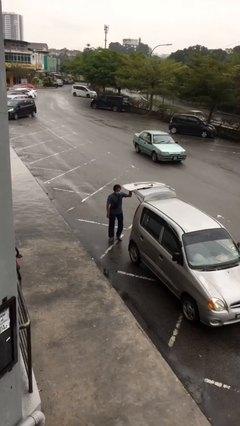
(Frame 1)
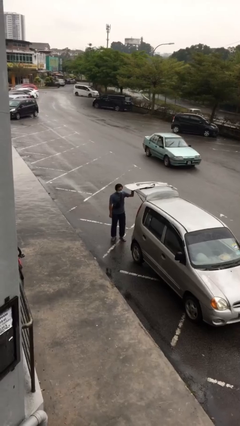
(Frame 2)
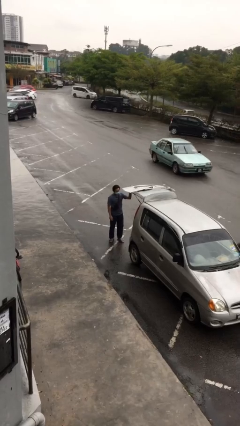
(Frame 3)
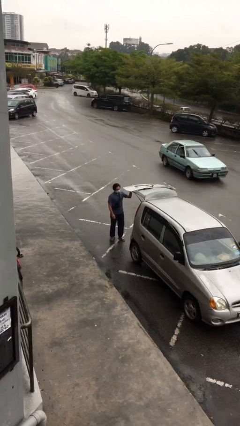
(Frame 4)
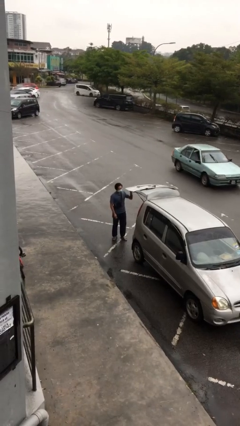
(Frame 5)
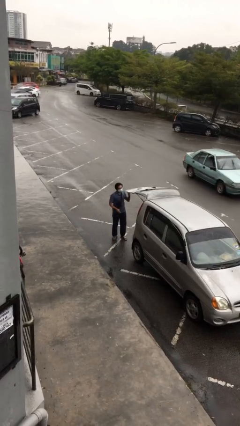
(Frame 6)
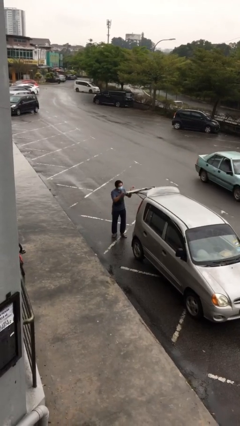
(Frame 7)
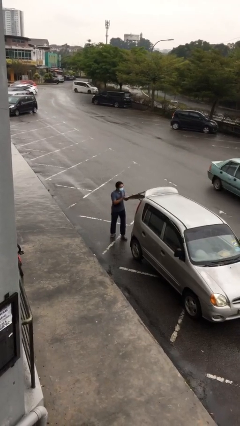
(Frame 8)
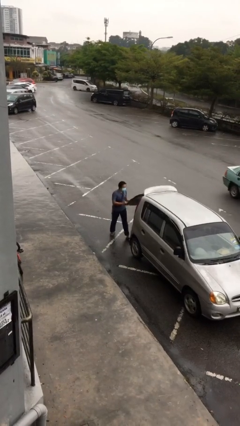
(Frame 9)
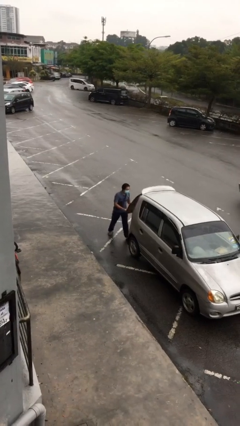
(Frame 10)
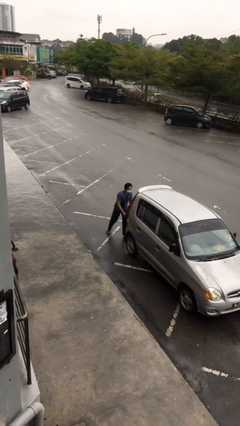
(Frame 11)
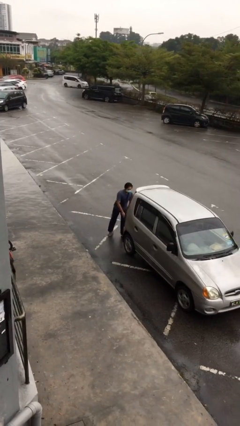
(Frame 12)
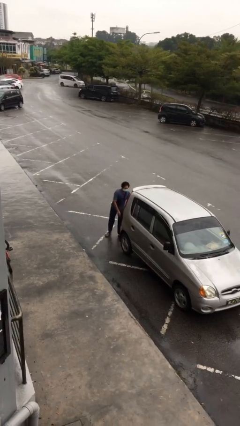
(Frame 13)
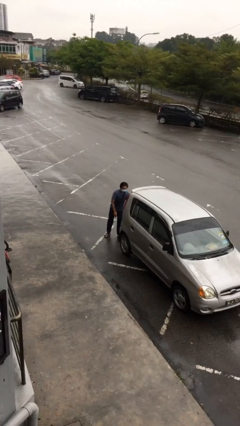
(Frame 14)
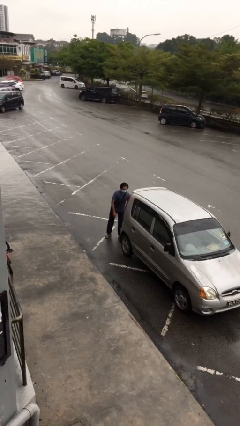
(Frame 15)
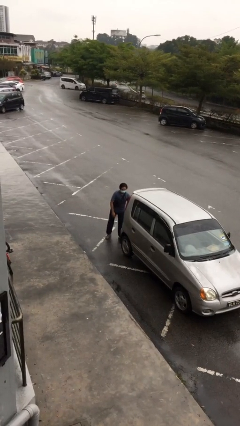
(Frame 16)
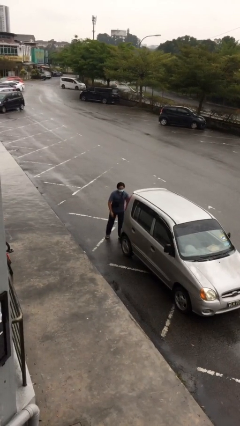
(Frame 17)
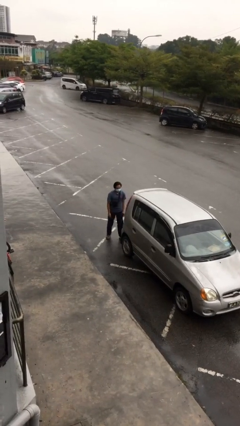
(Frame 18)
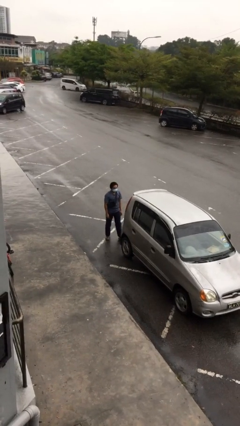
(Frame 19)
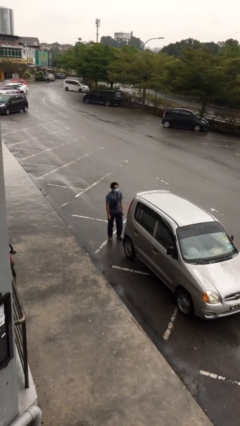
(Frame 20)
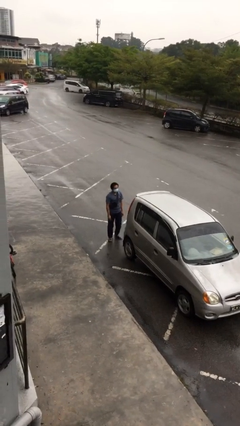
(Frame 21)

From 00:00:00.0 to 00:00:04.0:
person closes car trunk

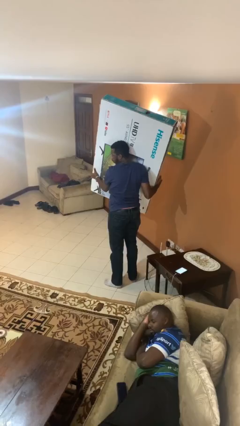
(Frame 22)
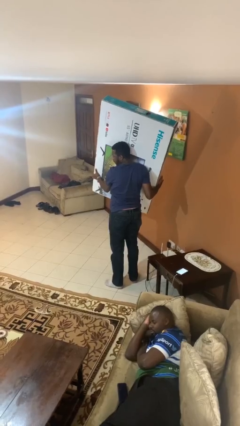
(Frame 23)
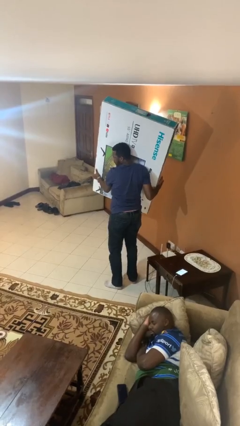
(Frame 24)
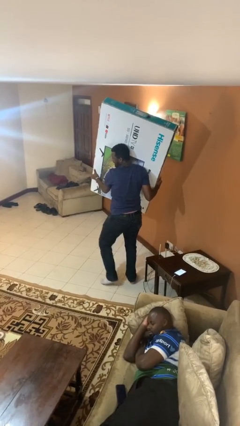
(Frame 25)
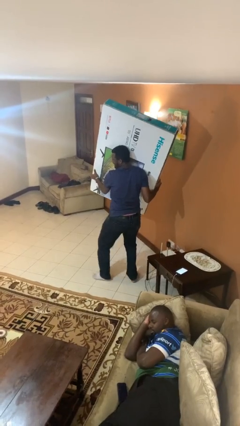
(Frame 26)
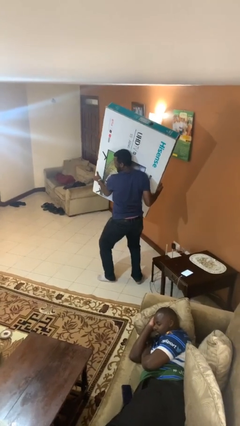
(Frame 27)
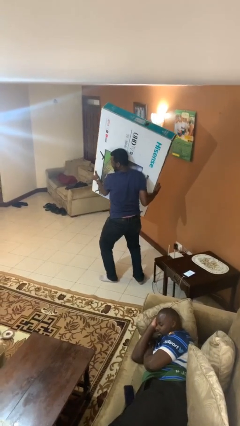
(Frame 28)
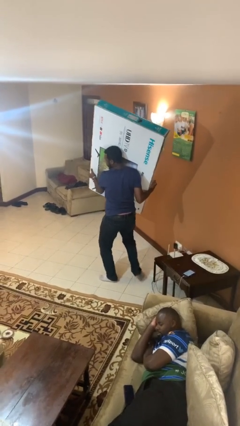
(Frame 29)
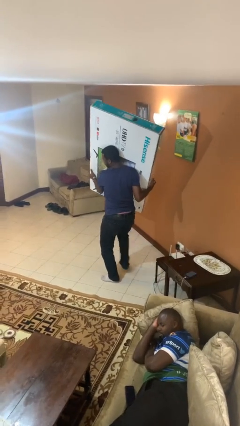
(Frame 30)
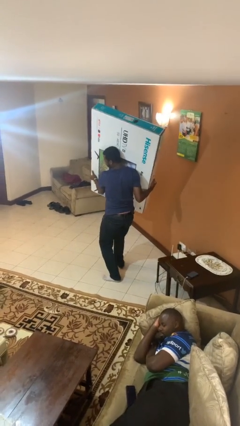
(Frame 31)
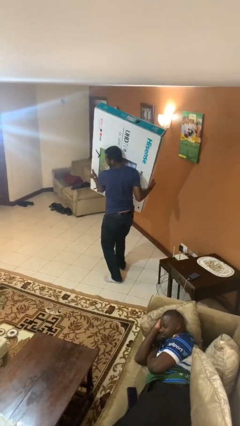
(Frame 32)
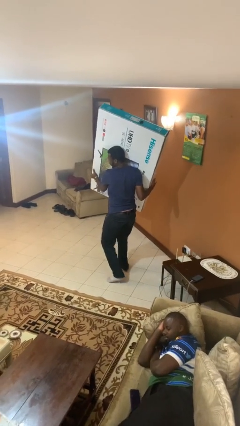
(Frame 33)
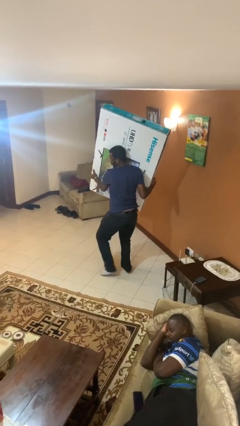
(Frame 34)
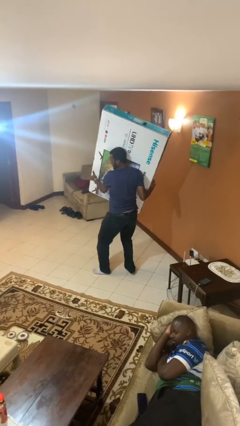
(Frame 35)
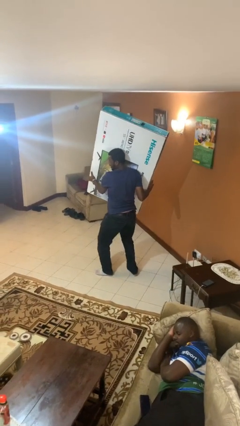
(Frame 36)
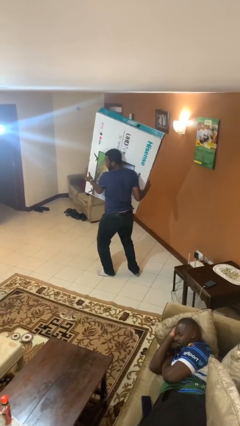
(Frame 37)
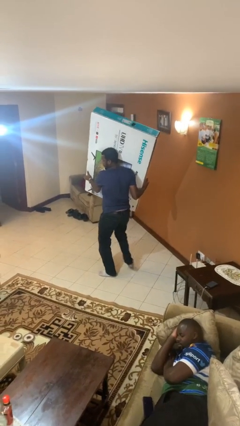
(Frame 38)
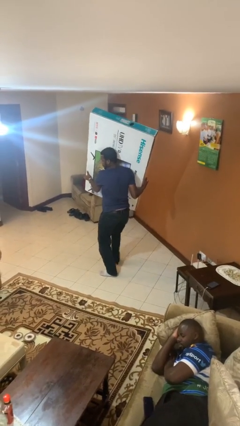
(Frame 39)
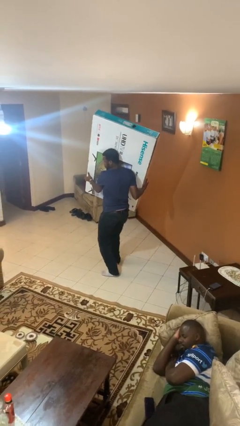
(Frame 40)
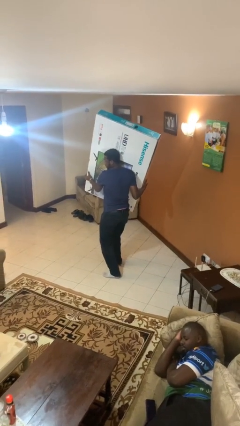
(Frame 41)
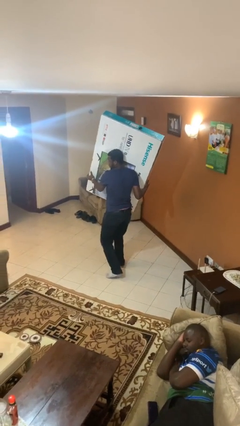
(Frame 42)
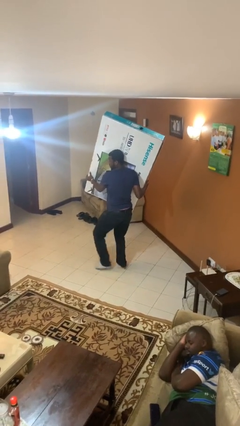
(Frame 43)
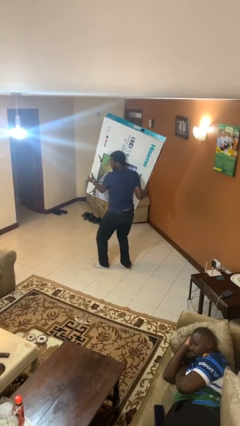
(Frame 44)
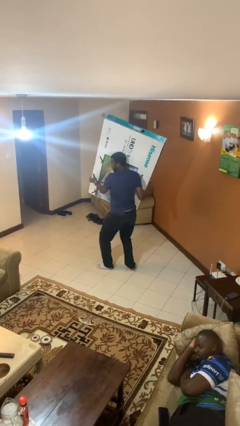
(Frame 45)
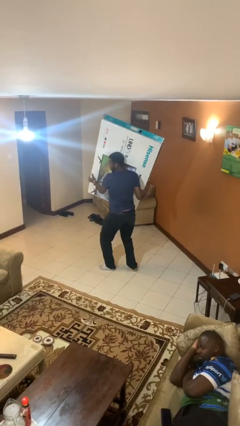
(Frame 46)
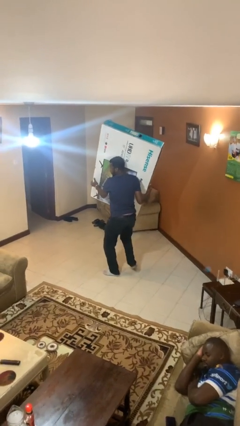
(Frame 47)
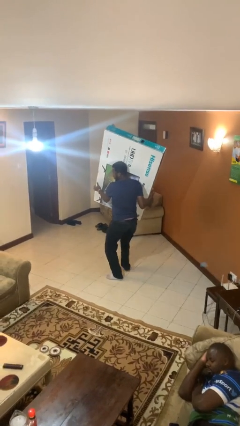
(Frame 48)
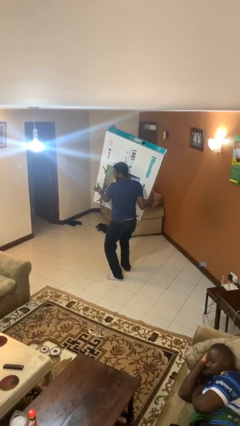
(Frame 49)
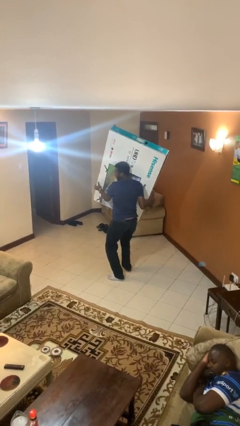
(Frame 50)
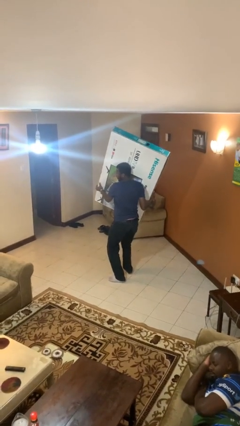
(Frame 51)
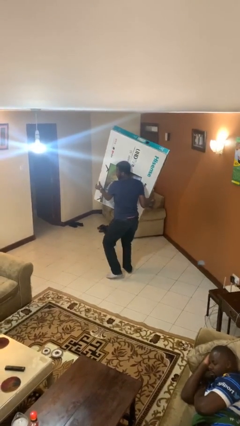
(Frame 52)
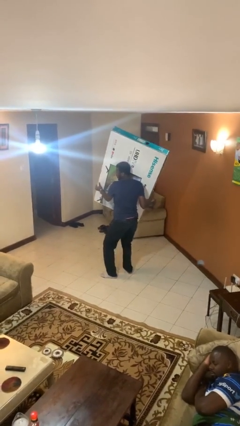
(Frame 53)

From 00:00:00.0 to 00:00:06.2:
person carries heavy object

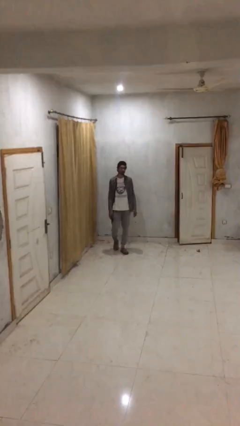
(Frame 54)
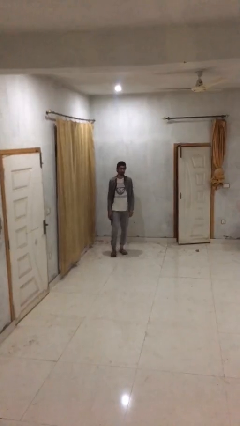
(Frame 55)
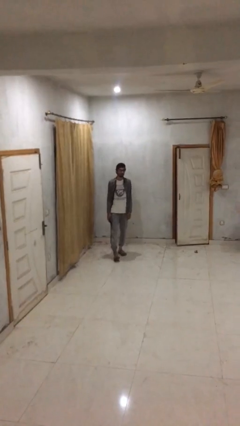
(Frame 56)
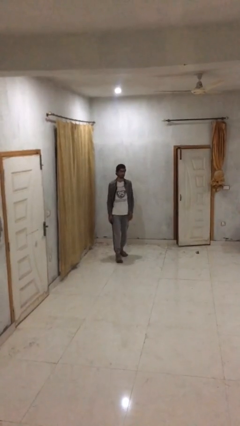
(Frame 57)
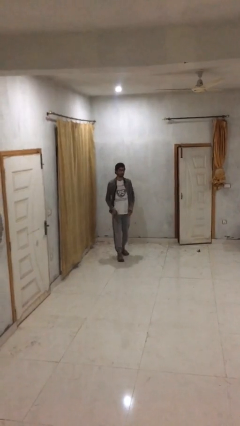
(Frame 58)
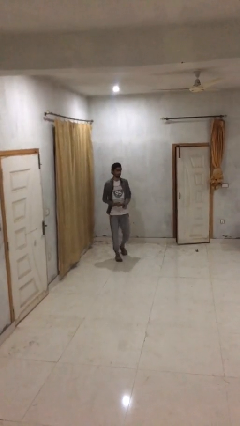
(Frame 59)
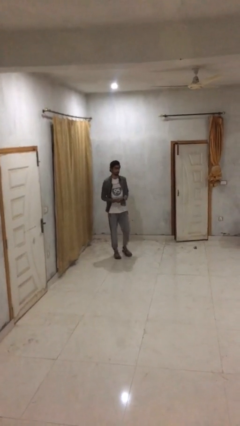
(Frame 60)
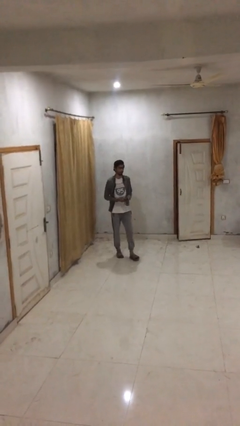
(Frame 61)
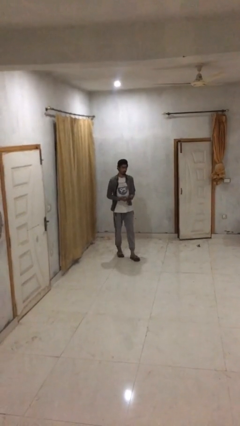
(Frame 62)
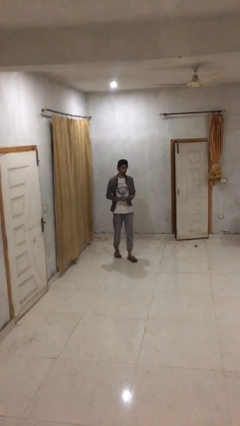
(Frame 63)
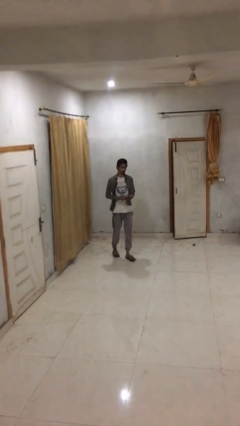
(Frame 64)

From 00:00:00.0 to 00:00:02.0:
person texts on phone

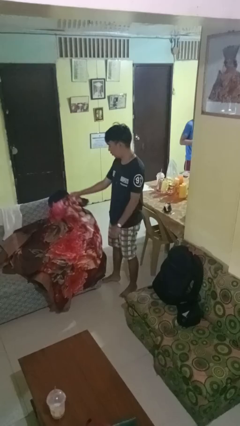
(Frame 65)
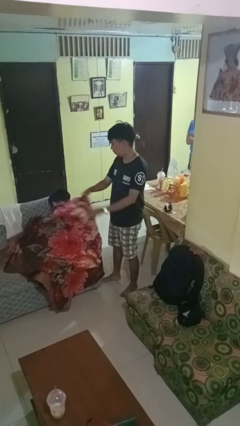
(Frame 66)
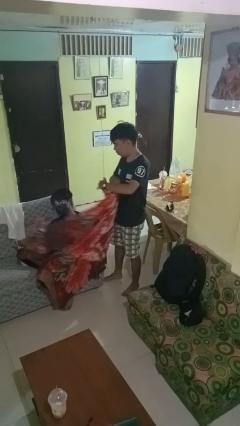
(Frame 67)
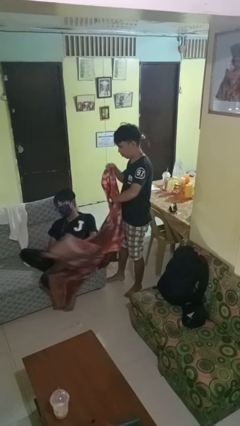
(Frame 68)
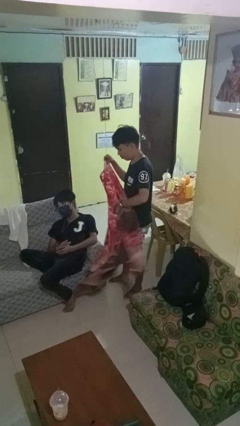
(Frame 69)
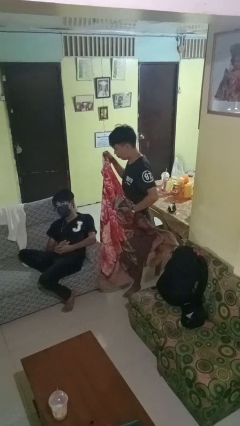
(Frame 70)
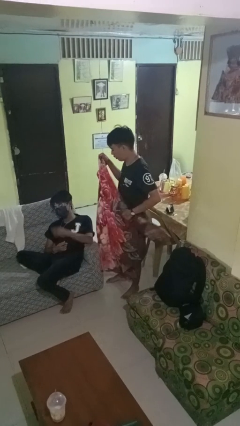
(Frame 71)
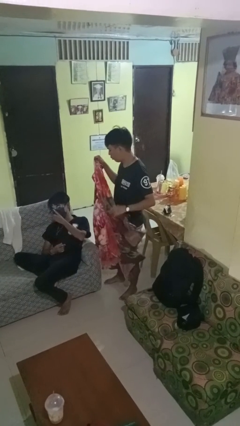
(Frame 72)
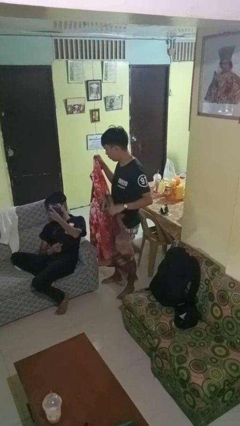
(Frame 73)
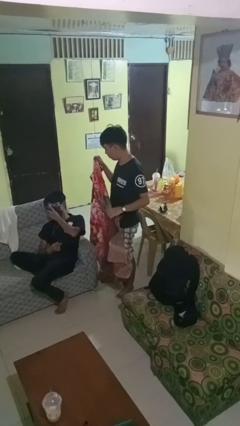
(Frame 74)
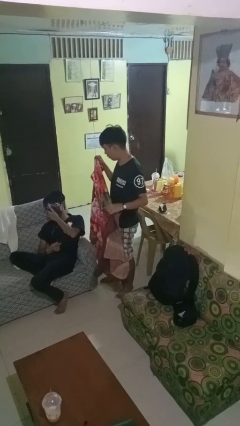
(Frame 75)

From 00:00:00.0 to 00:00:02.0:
person uncovers friend with blanket

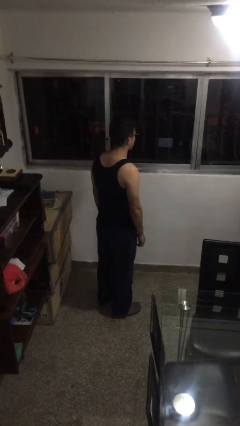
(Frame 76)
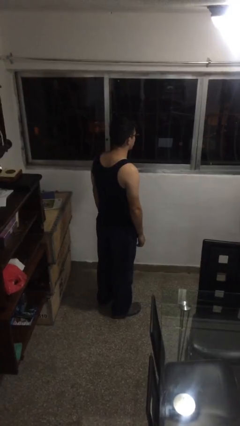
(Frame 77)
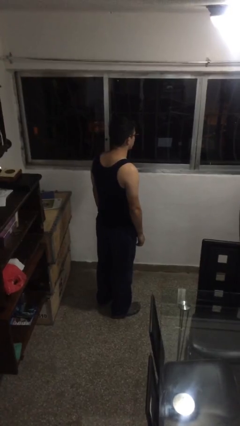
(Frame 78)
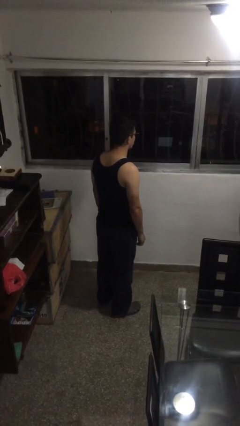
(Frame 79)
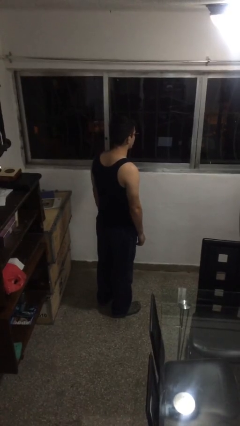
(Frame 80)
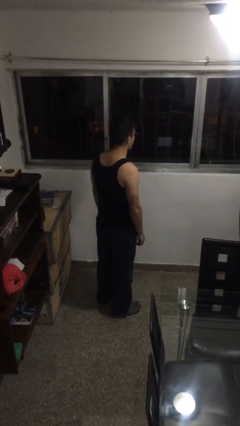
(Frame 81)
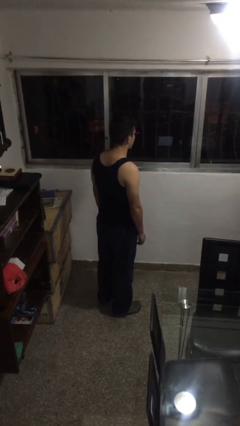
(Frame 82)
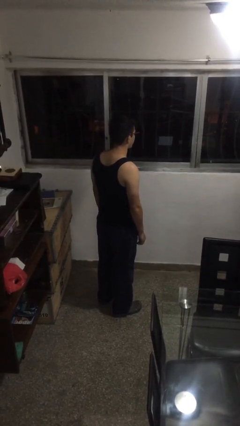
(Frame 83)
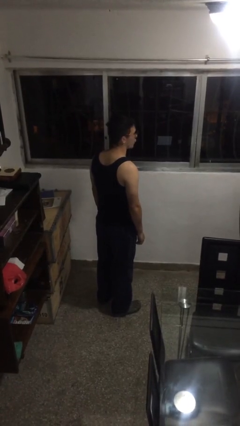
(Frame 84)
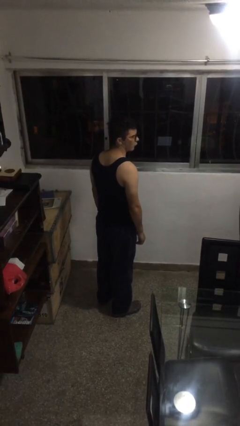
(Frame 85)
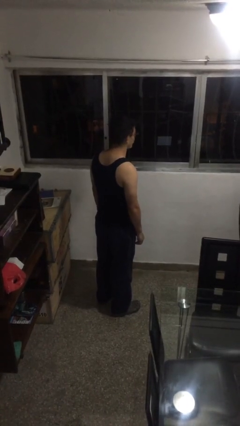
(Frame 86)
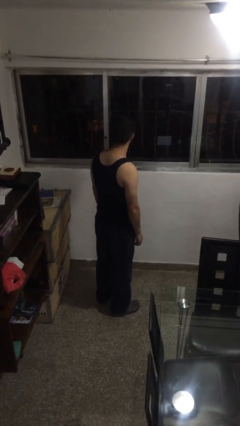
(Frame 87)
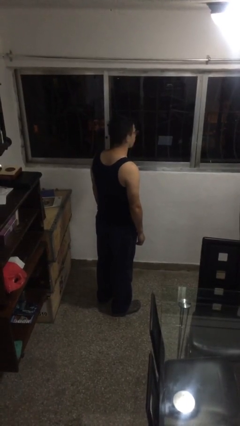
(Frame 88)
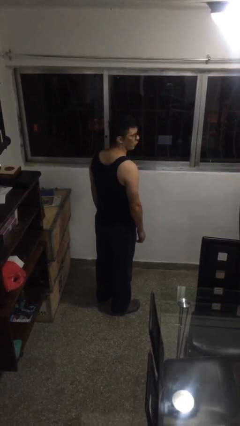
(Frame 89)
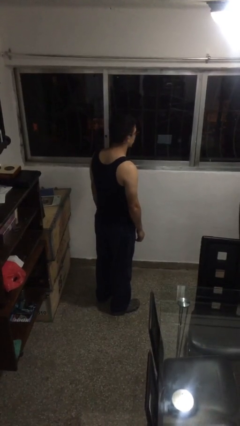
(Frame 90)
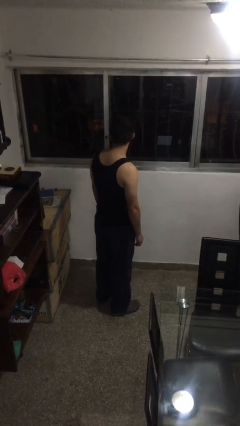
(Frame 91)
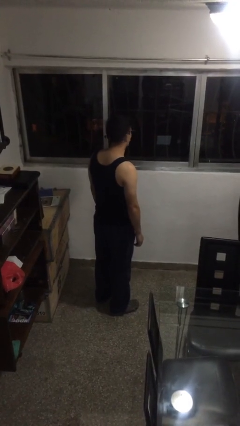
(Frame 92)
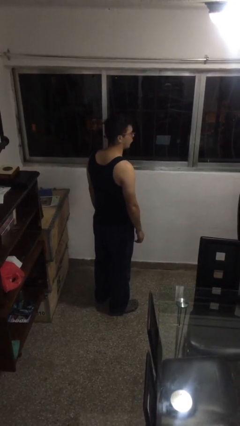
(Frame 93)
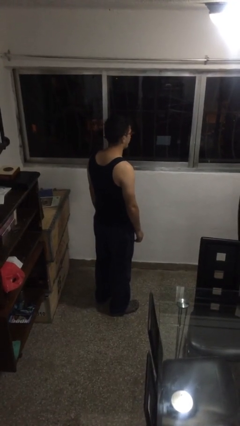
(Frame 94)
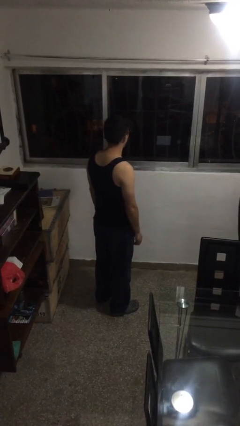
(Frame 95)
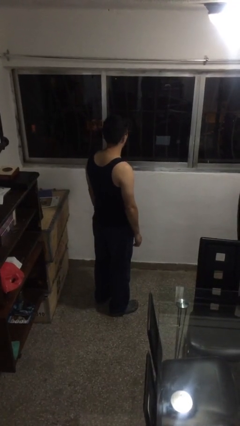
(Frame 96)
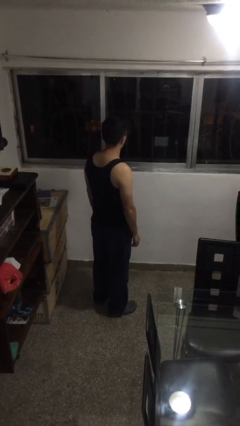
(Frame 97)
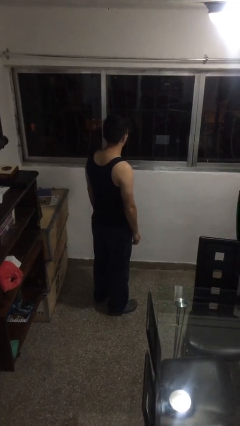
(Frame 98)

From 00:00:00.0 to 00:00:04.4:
person shakes head
